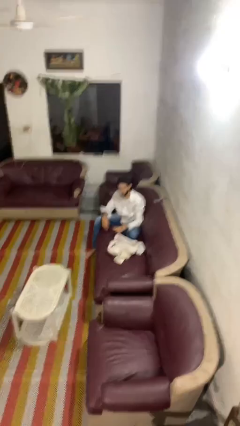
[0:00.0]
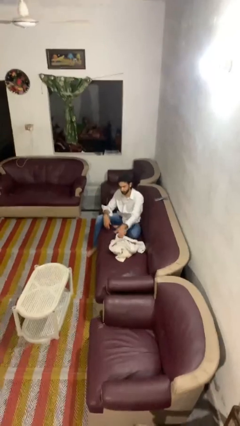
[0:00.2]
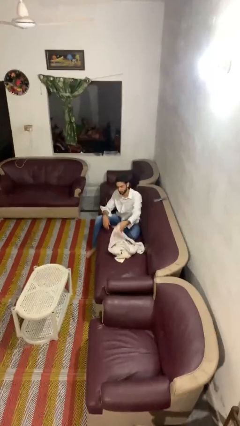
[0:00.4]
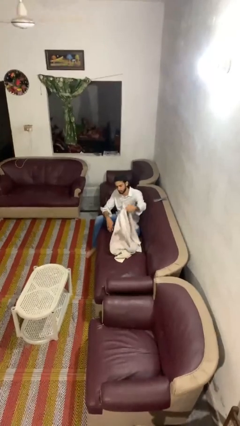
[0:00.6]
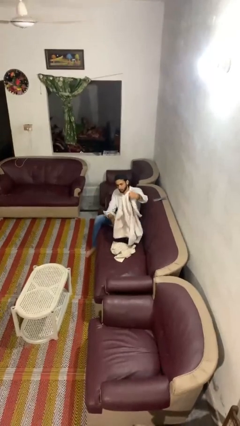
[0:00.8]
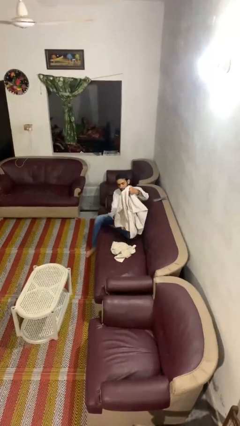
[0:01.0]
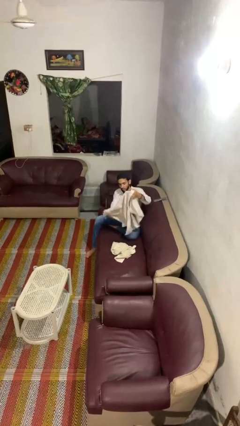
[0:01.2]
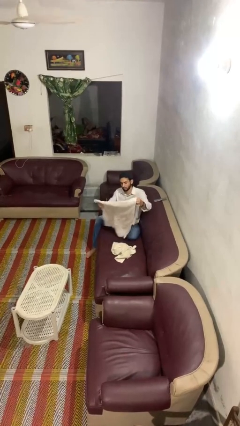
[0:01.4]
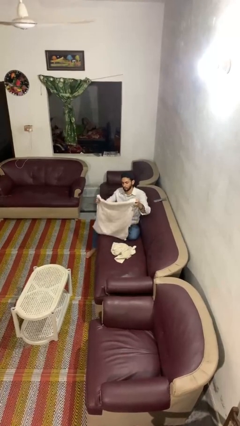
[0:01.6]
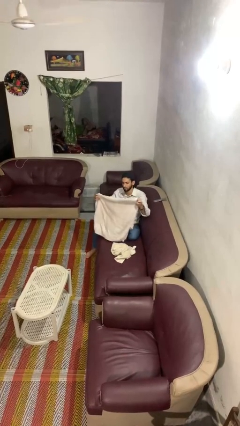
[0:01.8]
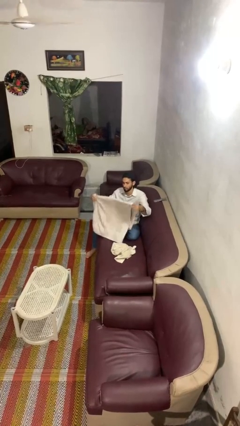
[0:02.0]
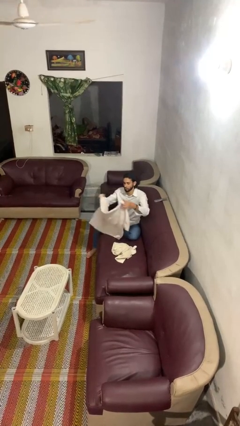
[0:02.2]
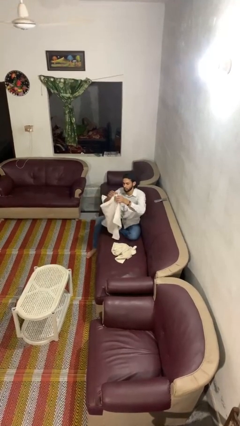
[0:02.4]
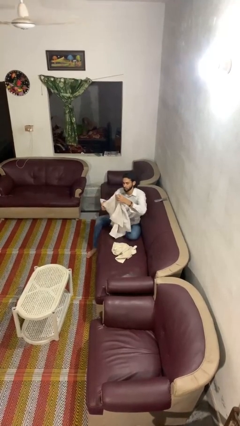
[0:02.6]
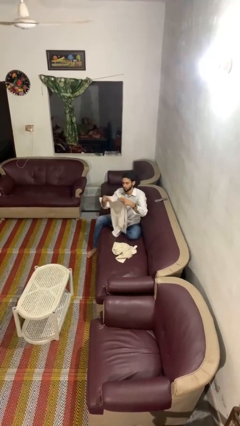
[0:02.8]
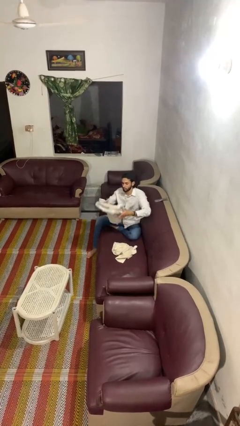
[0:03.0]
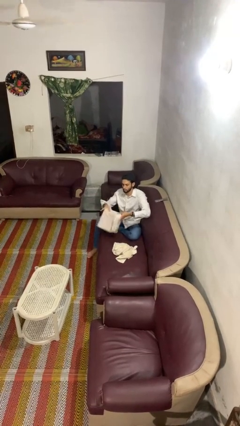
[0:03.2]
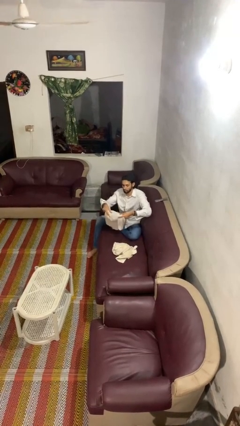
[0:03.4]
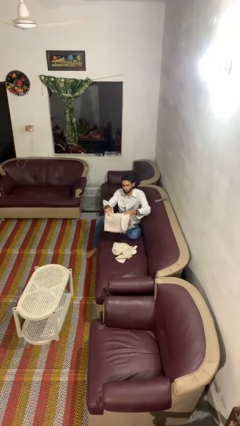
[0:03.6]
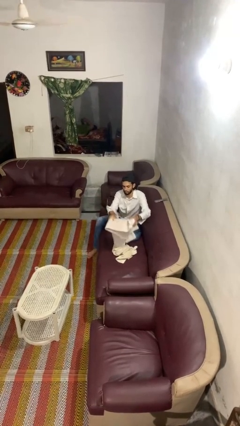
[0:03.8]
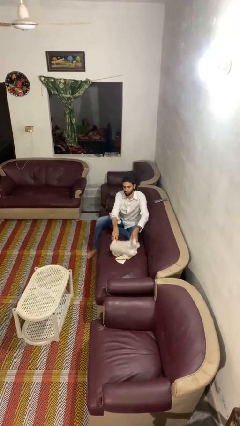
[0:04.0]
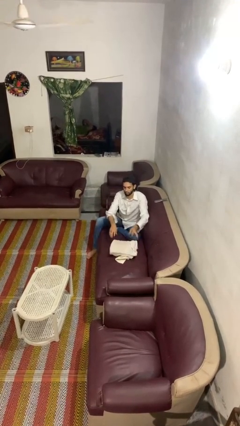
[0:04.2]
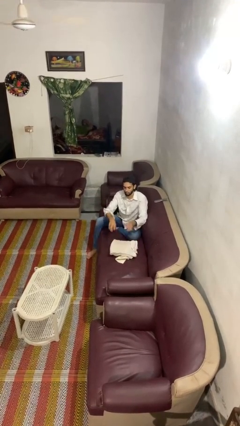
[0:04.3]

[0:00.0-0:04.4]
person folds towel

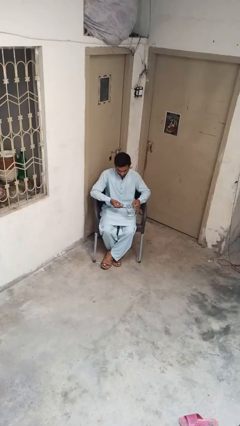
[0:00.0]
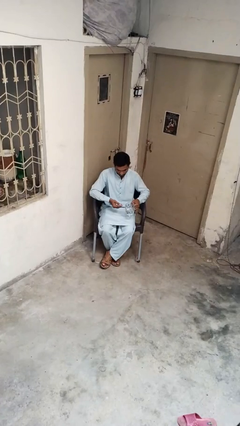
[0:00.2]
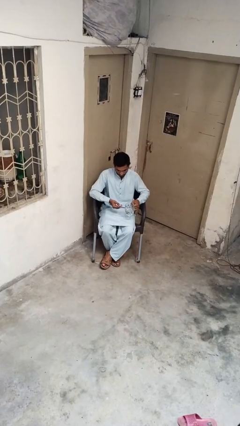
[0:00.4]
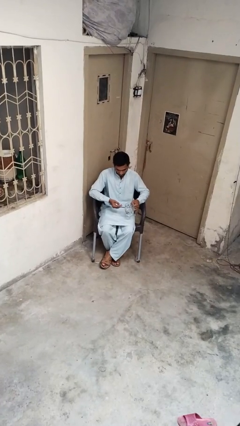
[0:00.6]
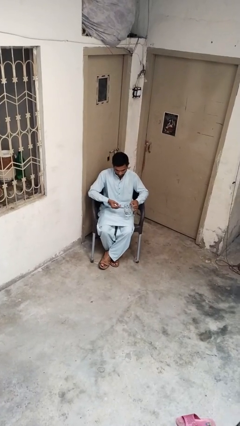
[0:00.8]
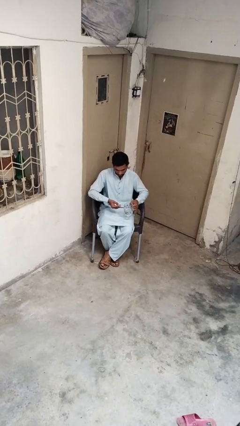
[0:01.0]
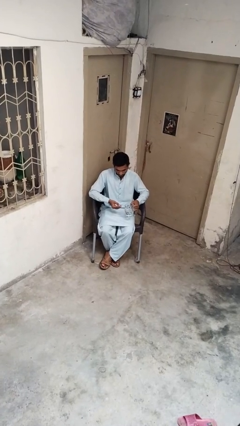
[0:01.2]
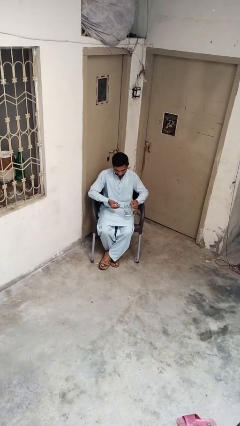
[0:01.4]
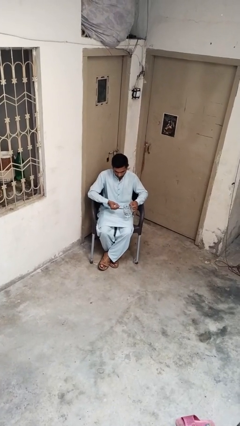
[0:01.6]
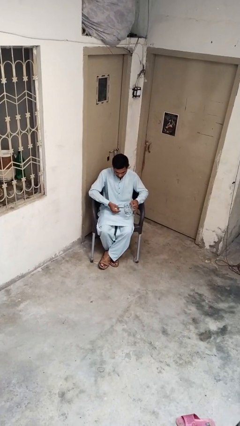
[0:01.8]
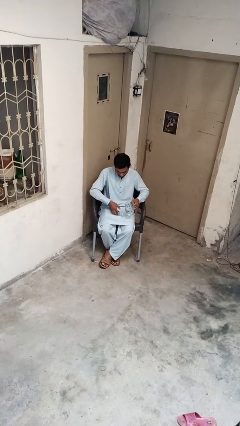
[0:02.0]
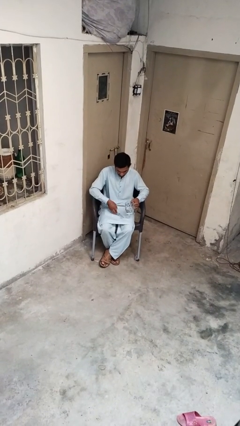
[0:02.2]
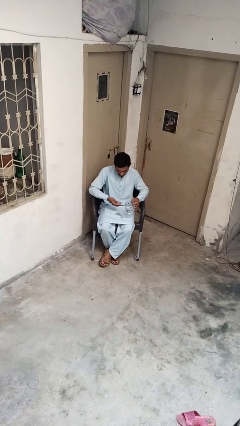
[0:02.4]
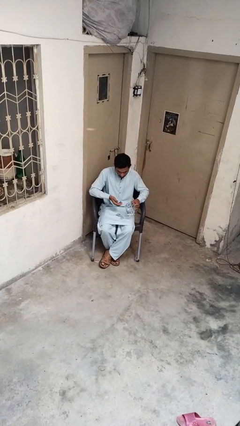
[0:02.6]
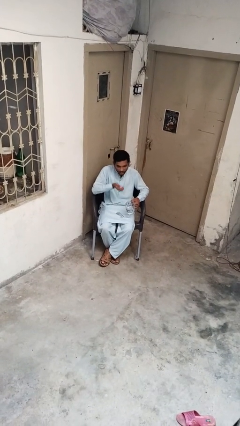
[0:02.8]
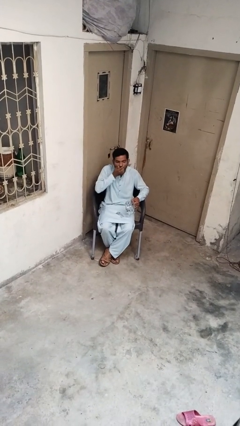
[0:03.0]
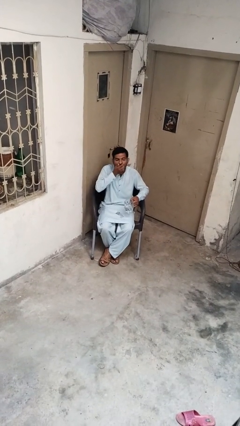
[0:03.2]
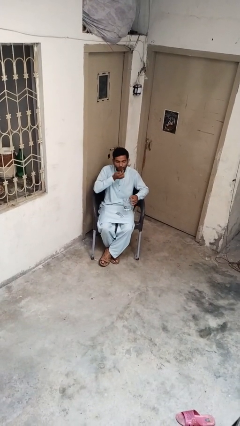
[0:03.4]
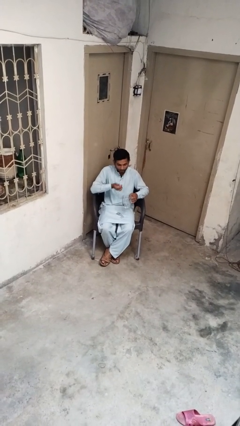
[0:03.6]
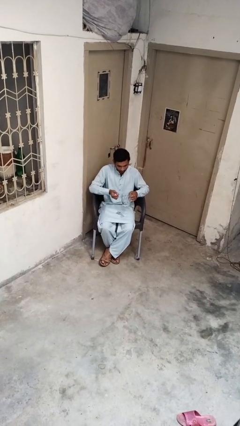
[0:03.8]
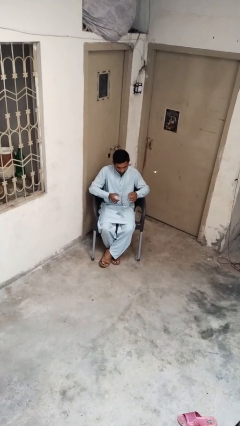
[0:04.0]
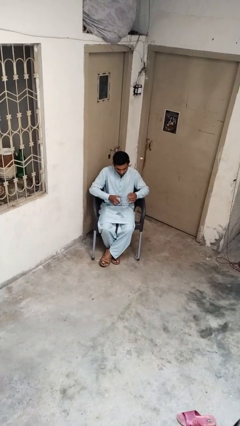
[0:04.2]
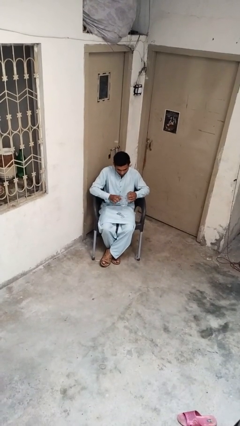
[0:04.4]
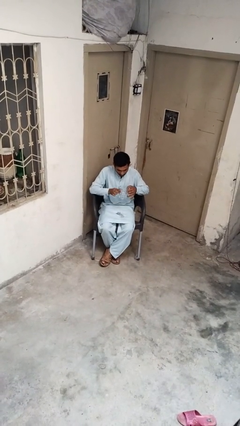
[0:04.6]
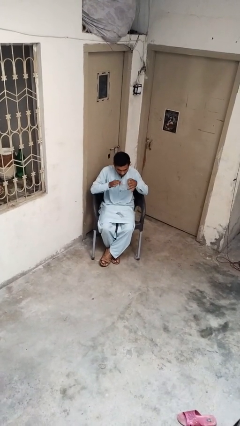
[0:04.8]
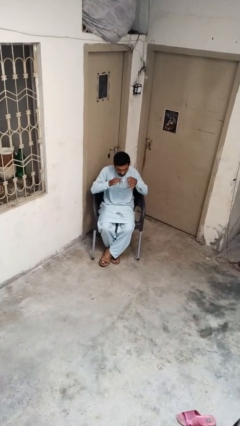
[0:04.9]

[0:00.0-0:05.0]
person takes medicine pills

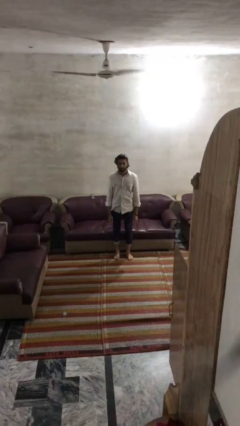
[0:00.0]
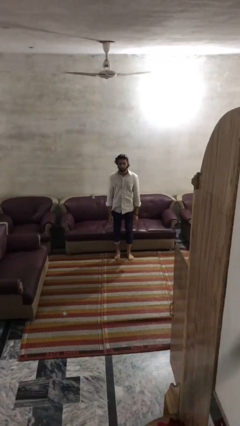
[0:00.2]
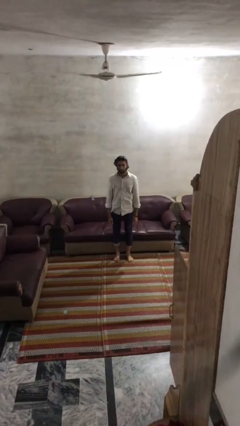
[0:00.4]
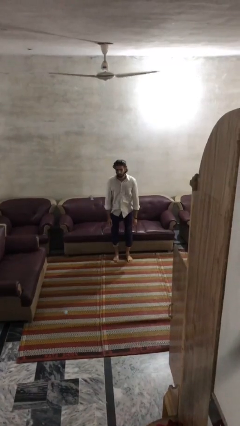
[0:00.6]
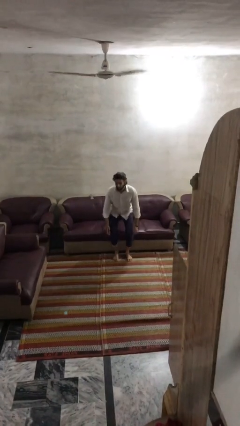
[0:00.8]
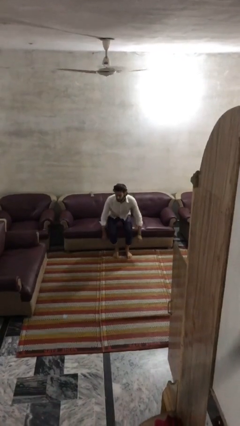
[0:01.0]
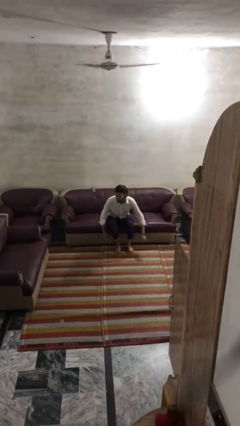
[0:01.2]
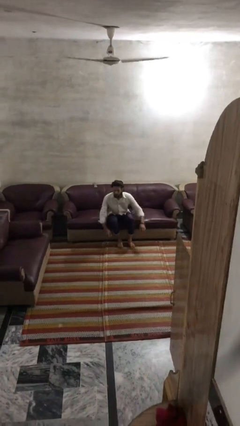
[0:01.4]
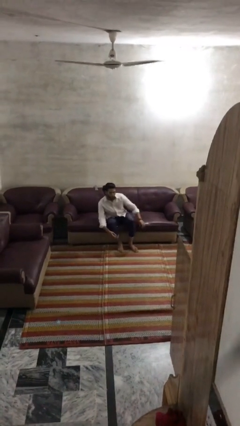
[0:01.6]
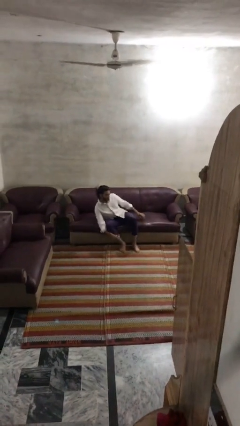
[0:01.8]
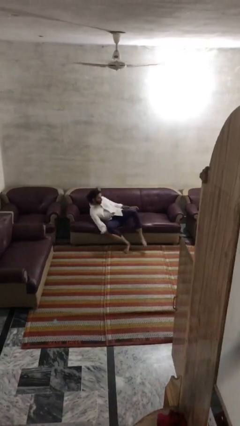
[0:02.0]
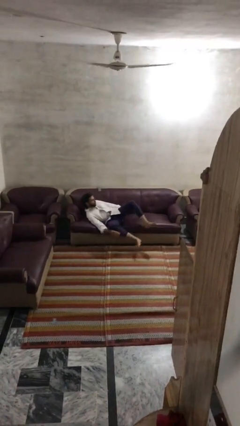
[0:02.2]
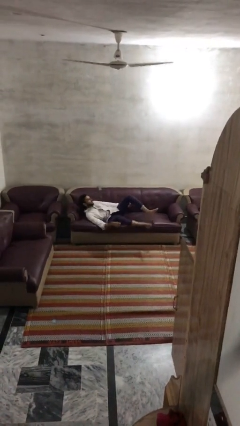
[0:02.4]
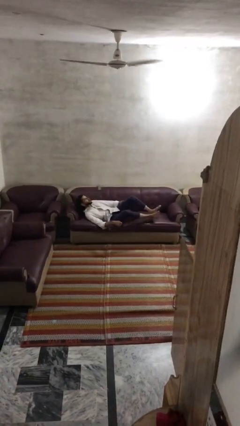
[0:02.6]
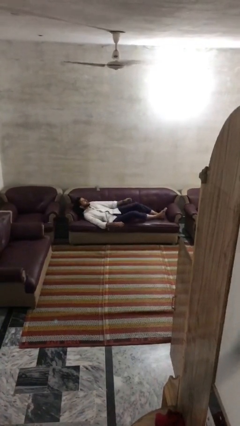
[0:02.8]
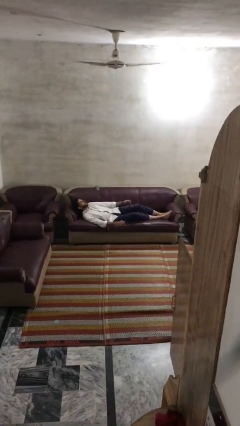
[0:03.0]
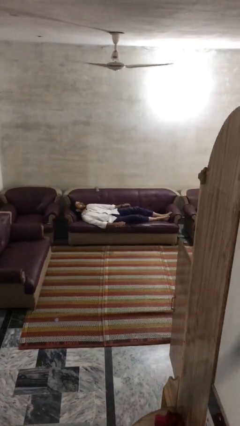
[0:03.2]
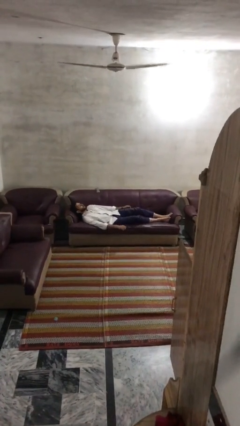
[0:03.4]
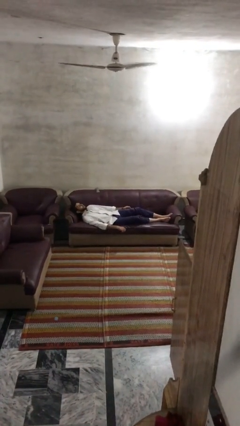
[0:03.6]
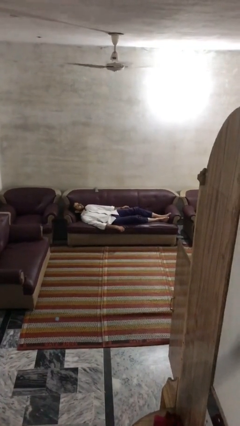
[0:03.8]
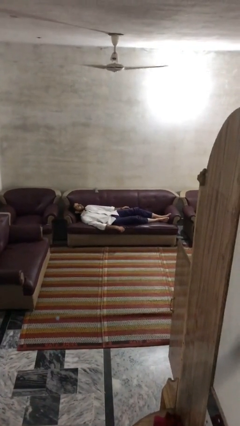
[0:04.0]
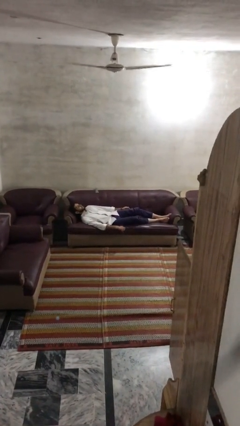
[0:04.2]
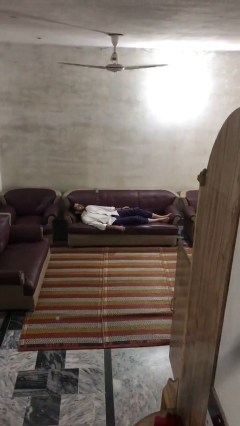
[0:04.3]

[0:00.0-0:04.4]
person lies down on couch

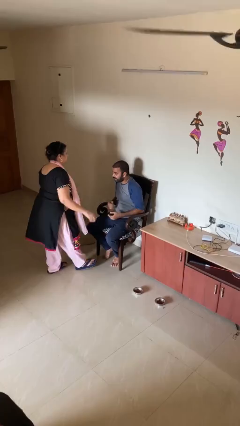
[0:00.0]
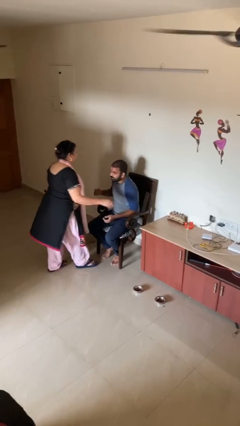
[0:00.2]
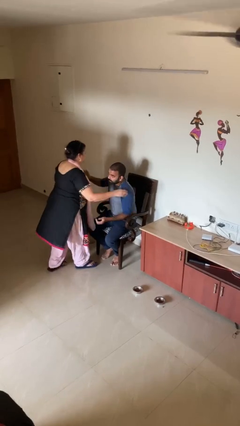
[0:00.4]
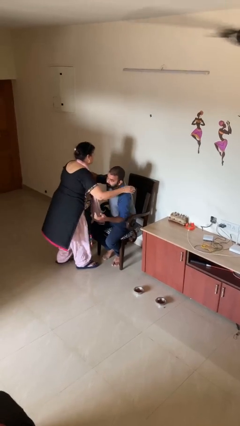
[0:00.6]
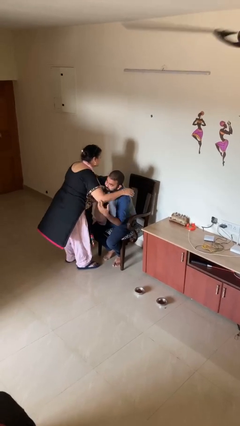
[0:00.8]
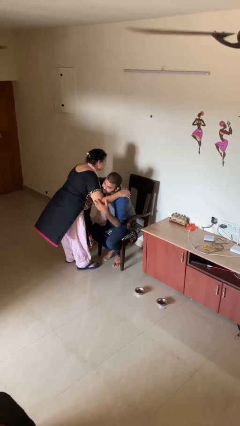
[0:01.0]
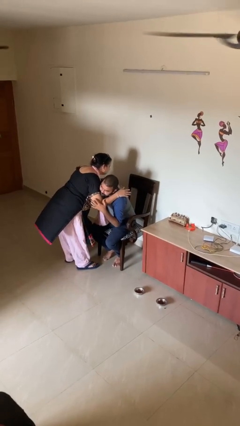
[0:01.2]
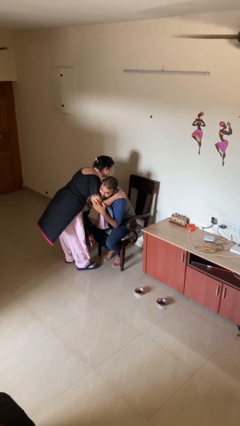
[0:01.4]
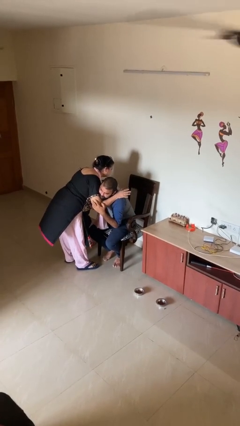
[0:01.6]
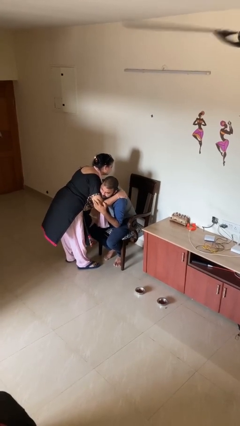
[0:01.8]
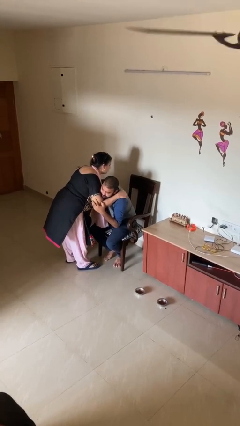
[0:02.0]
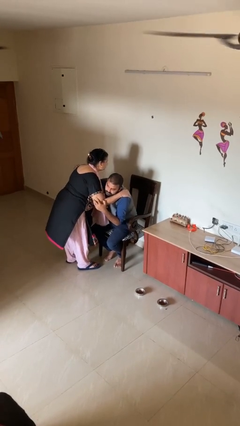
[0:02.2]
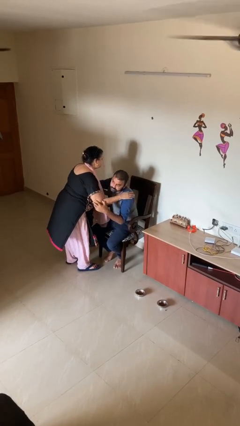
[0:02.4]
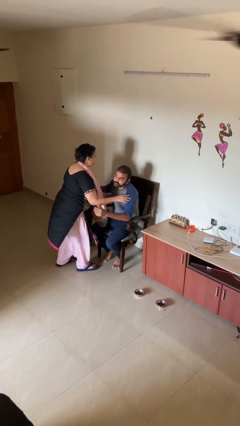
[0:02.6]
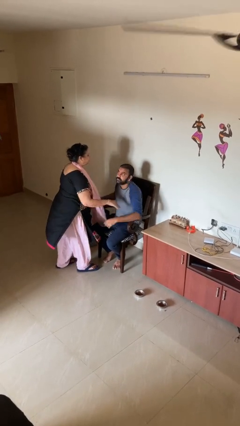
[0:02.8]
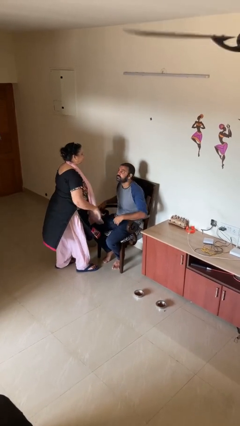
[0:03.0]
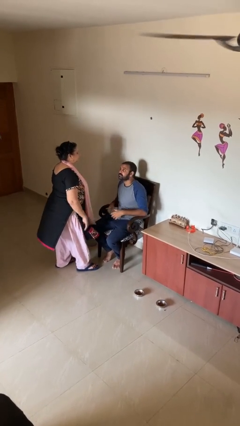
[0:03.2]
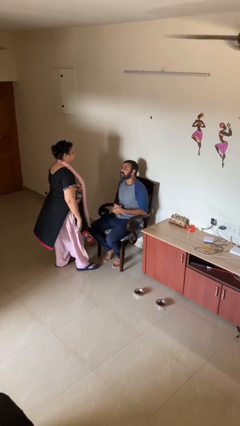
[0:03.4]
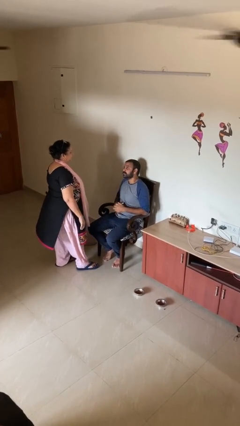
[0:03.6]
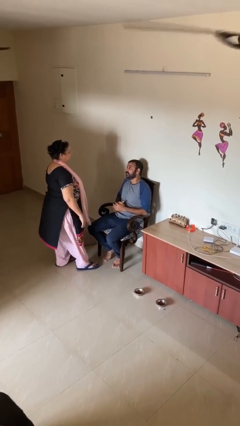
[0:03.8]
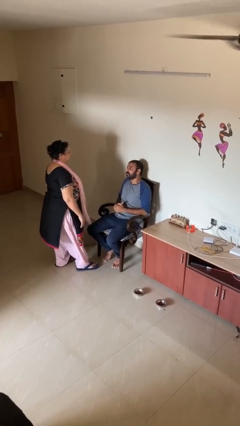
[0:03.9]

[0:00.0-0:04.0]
person embraces person

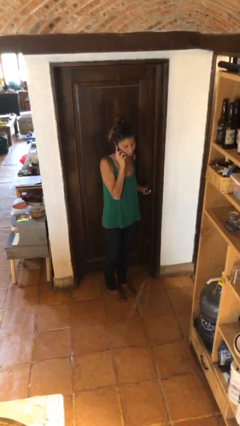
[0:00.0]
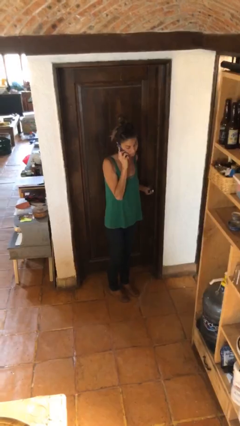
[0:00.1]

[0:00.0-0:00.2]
person opens facility door
